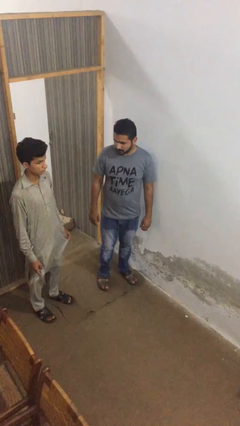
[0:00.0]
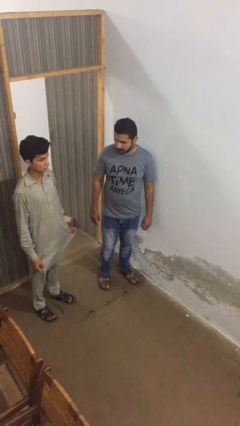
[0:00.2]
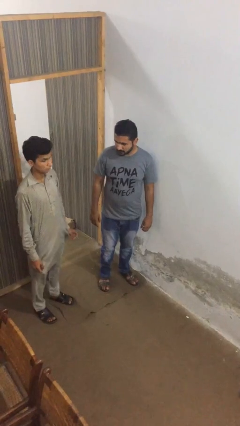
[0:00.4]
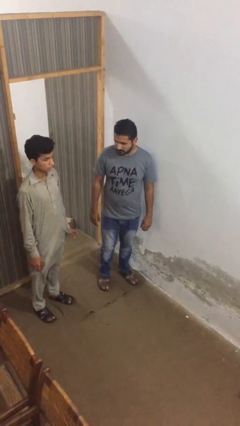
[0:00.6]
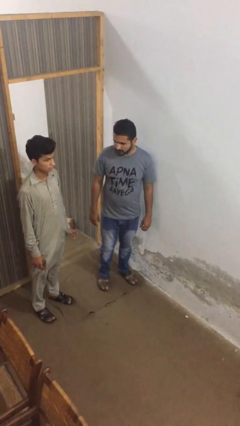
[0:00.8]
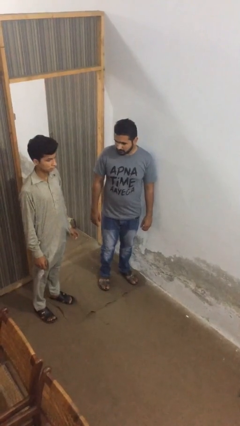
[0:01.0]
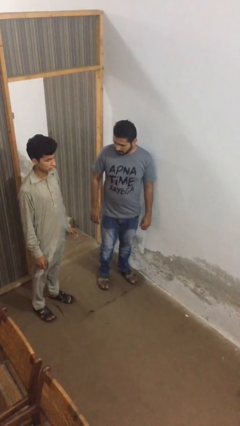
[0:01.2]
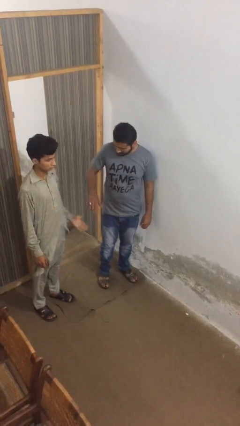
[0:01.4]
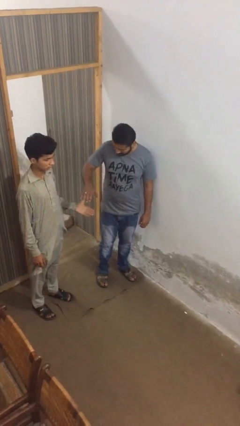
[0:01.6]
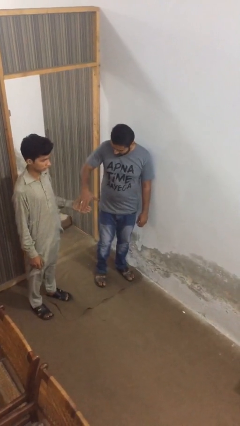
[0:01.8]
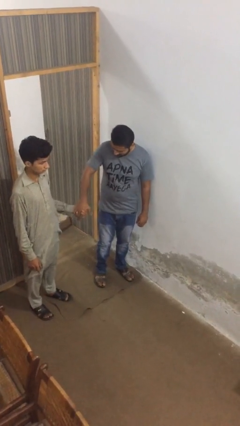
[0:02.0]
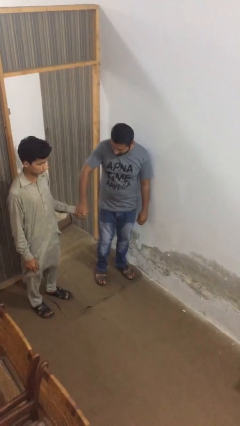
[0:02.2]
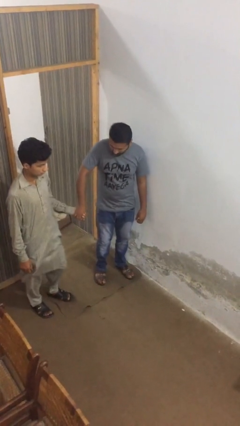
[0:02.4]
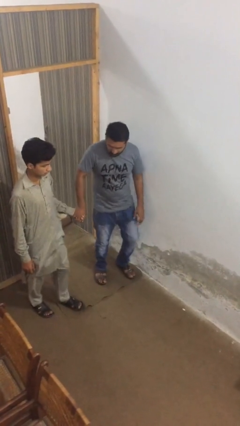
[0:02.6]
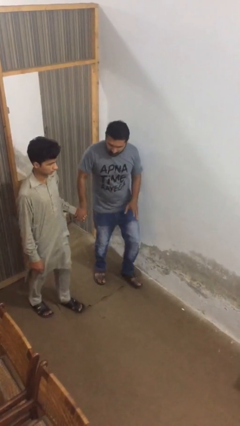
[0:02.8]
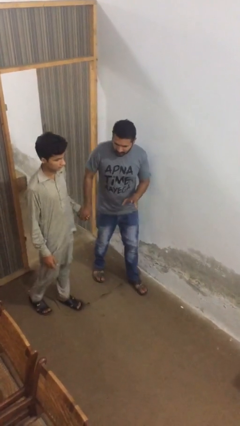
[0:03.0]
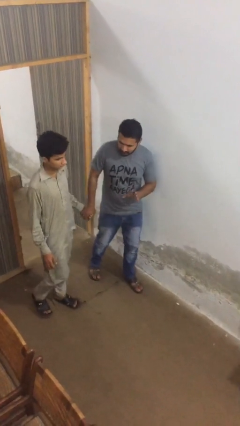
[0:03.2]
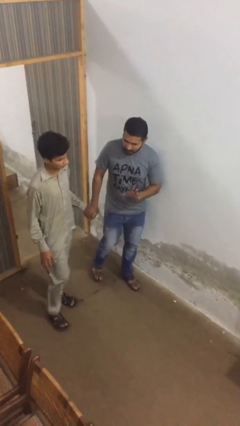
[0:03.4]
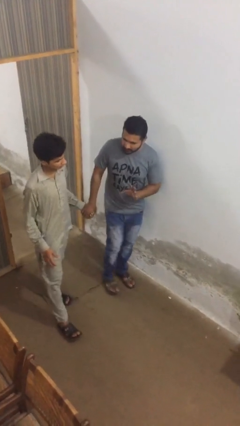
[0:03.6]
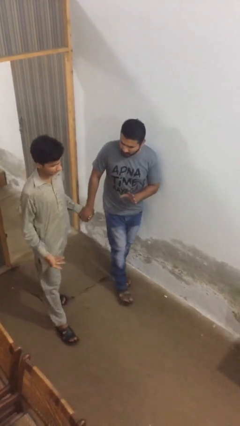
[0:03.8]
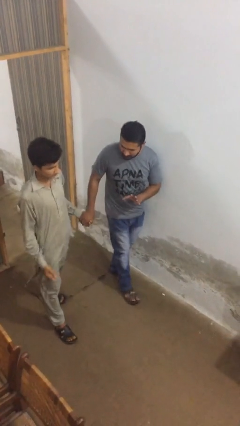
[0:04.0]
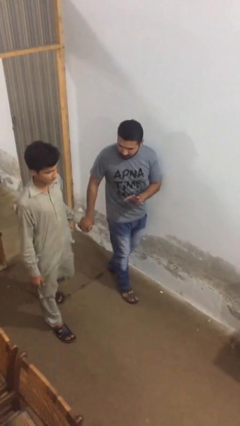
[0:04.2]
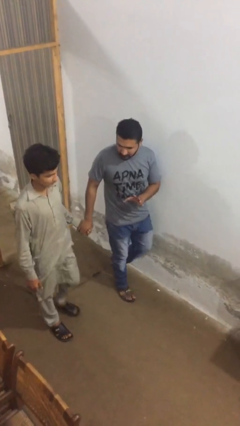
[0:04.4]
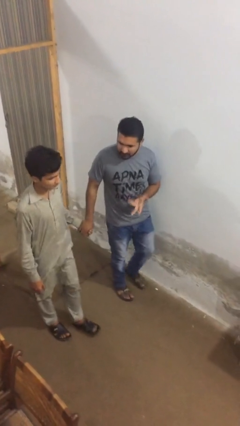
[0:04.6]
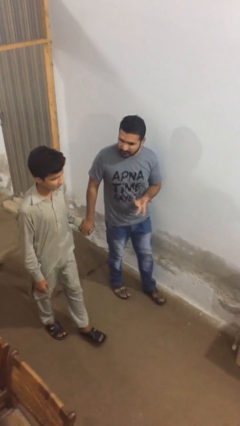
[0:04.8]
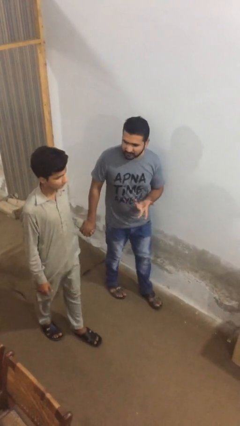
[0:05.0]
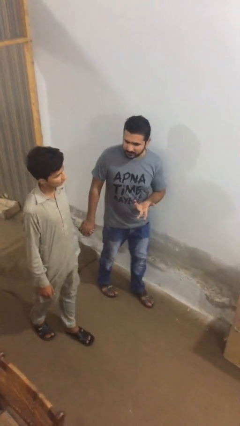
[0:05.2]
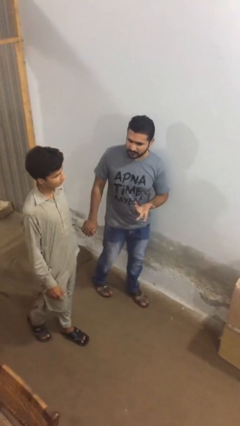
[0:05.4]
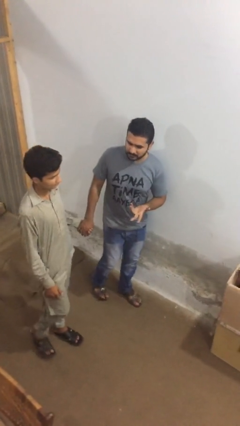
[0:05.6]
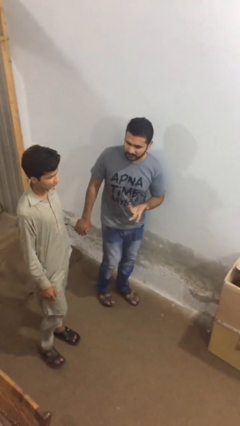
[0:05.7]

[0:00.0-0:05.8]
person holds hand

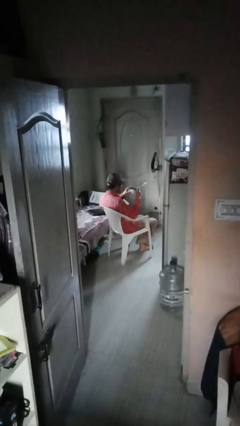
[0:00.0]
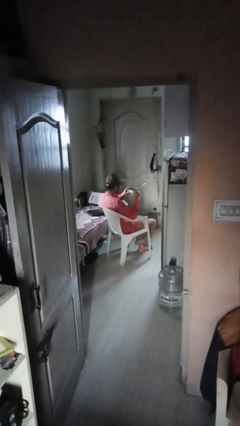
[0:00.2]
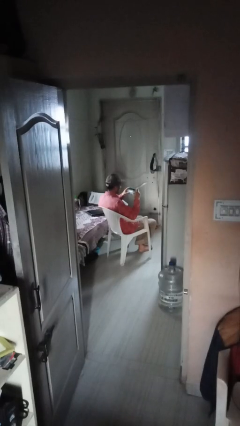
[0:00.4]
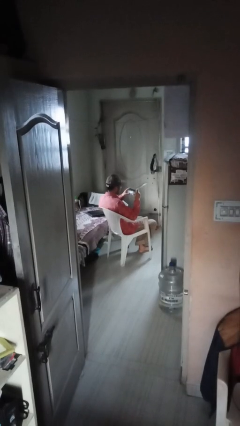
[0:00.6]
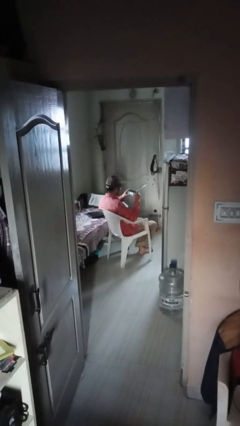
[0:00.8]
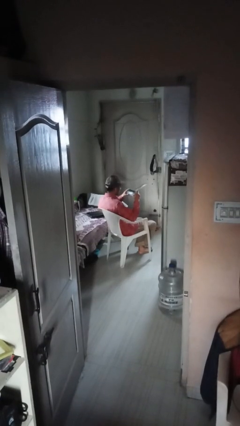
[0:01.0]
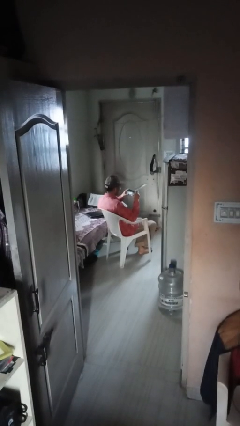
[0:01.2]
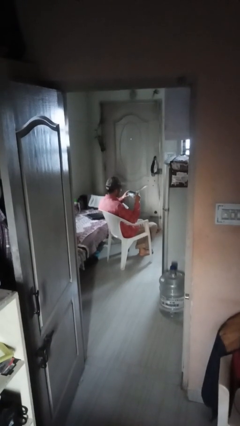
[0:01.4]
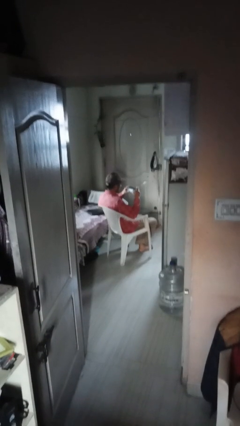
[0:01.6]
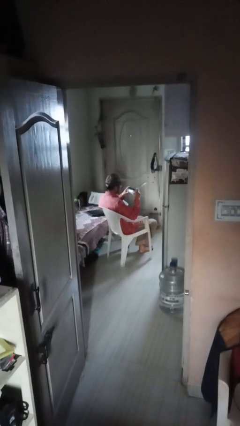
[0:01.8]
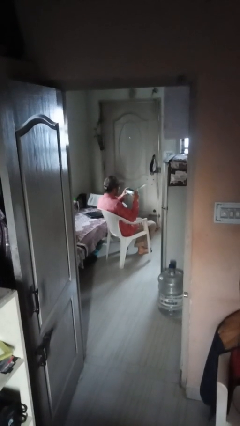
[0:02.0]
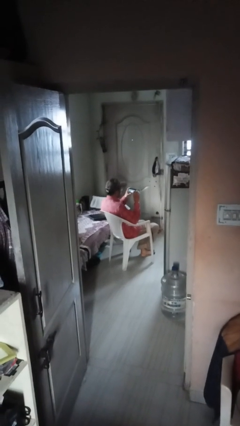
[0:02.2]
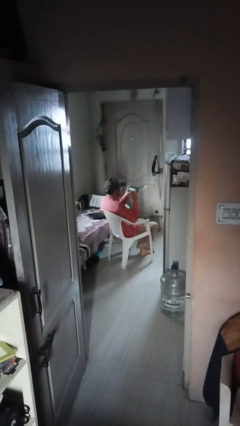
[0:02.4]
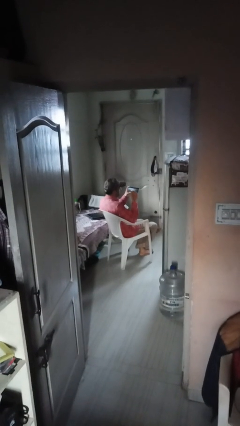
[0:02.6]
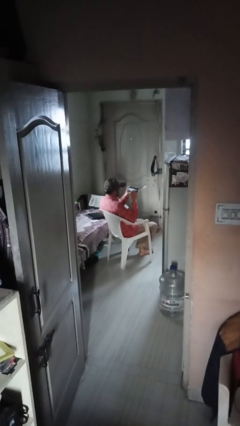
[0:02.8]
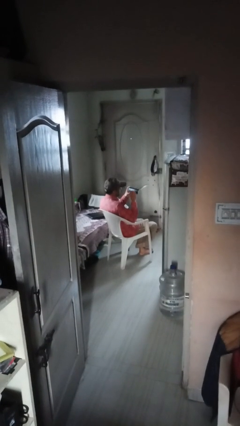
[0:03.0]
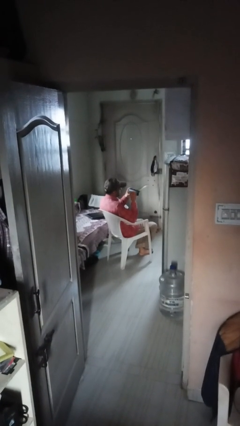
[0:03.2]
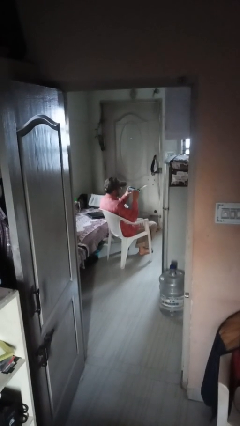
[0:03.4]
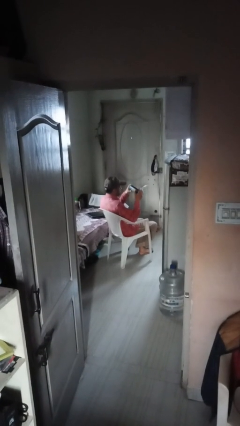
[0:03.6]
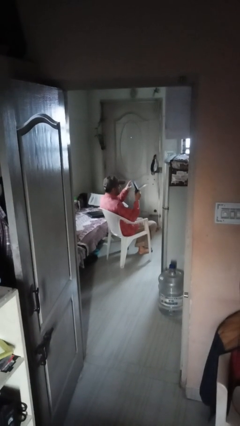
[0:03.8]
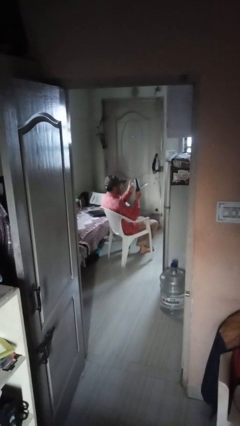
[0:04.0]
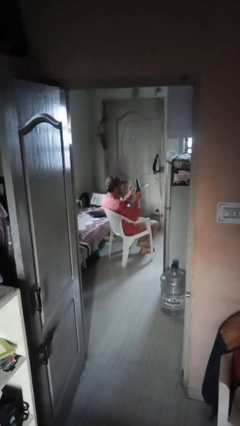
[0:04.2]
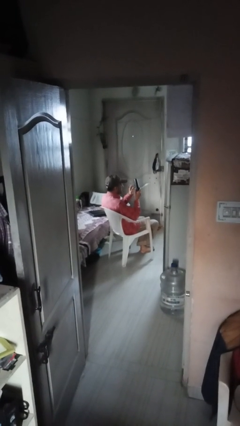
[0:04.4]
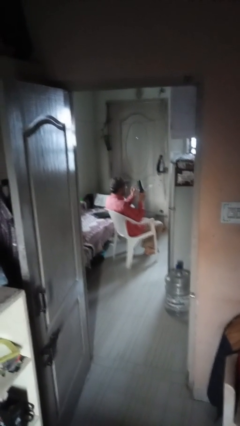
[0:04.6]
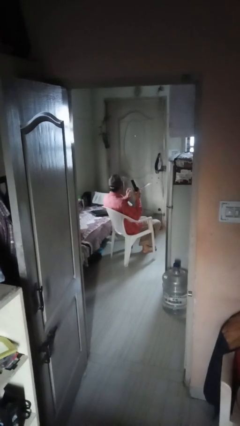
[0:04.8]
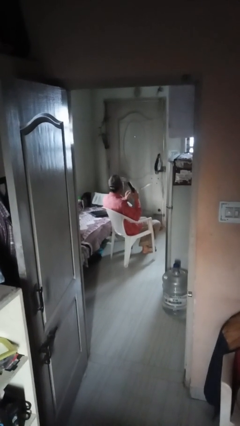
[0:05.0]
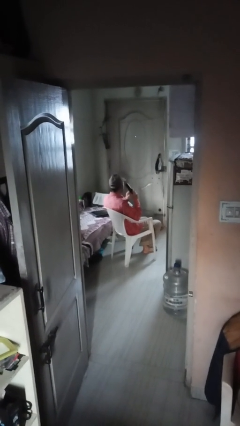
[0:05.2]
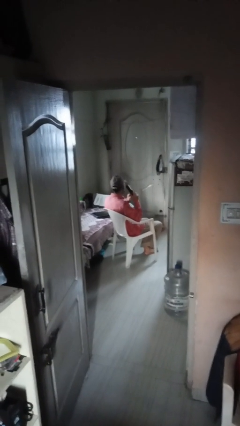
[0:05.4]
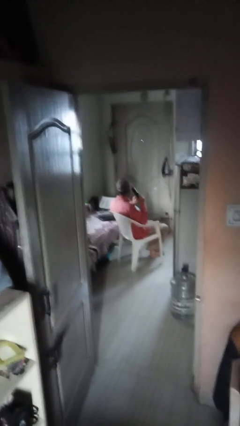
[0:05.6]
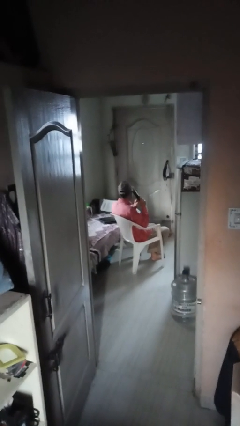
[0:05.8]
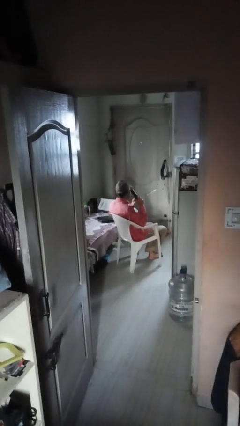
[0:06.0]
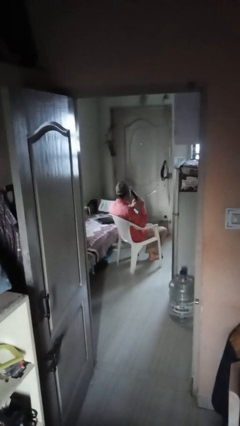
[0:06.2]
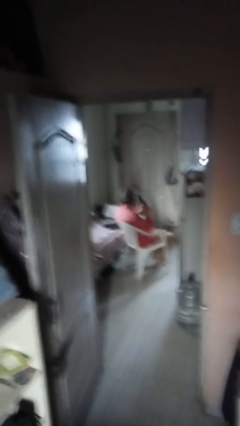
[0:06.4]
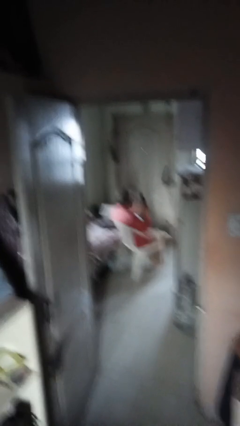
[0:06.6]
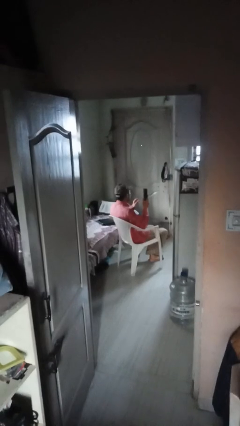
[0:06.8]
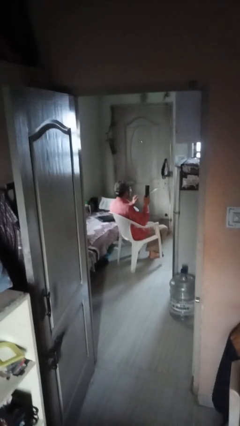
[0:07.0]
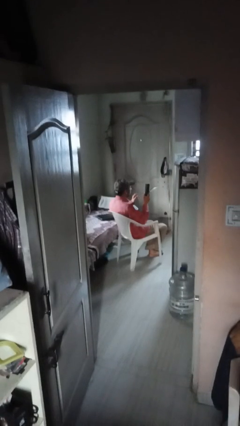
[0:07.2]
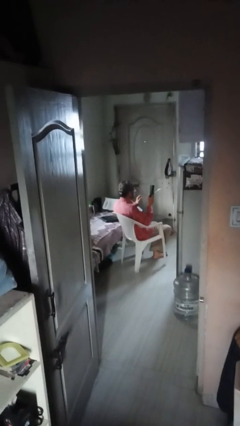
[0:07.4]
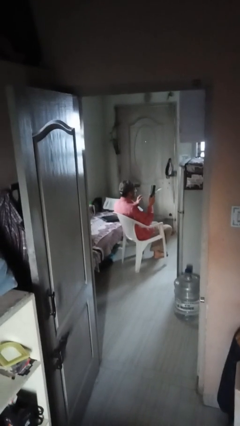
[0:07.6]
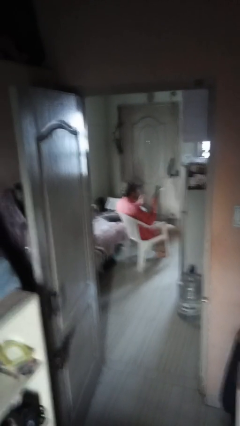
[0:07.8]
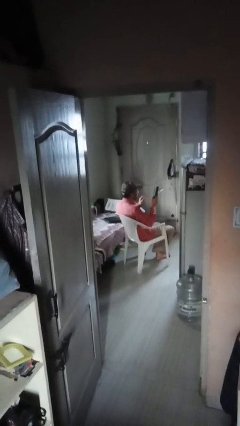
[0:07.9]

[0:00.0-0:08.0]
person taps object with finger

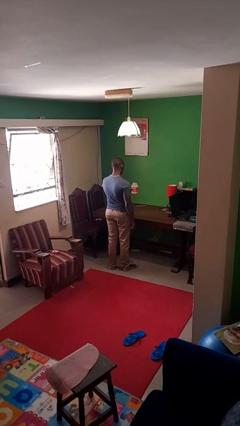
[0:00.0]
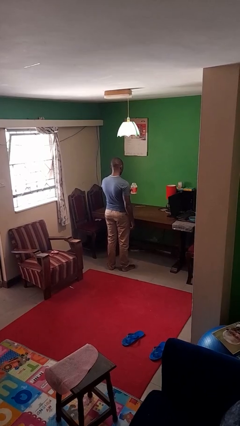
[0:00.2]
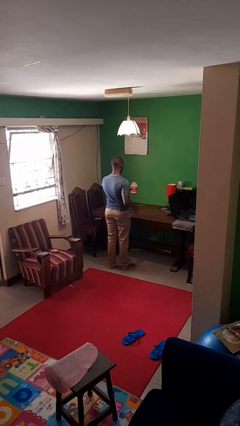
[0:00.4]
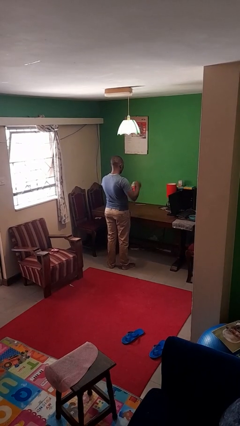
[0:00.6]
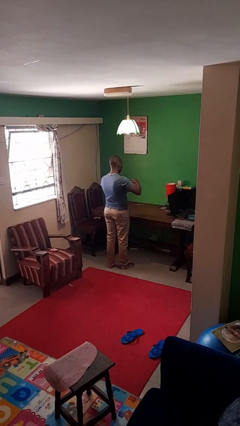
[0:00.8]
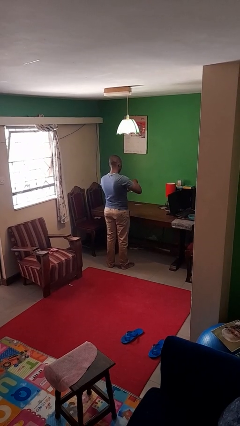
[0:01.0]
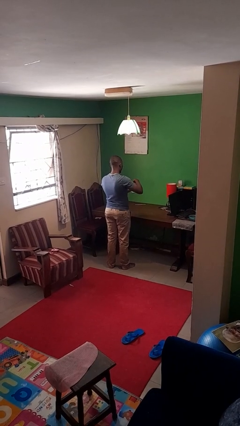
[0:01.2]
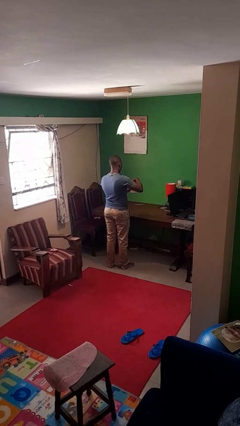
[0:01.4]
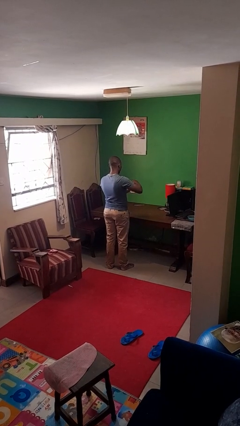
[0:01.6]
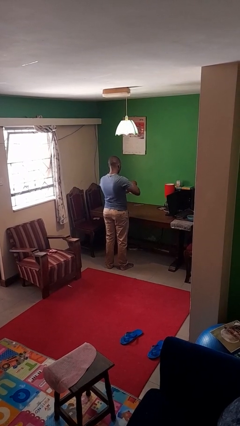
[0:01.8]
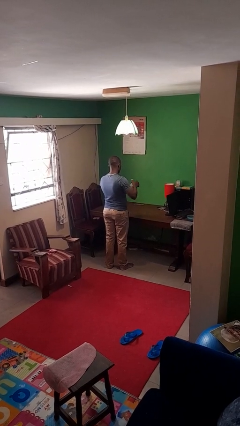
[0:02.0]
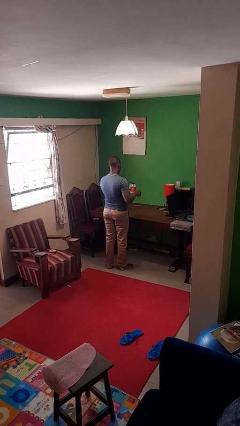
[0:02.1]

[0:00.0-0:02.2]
person closes jar

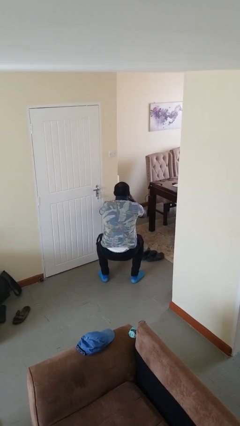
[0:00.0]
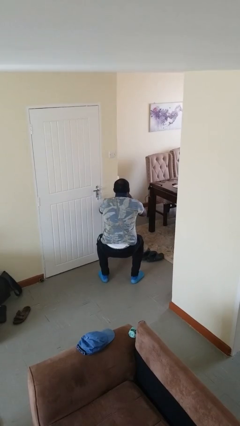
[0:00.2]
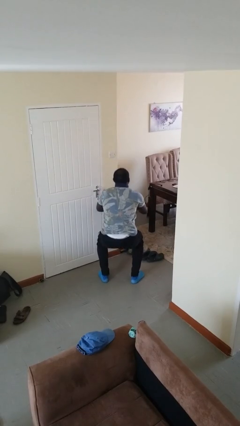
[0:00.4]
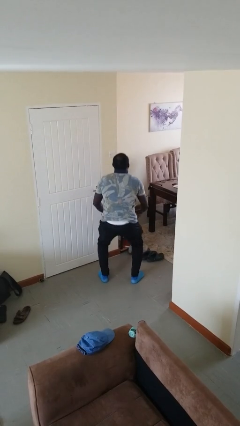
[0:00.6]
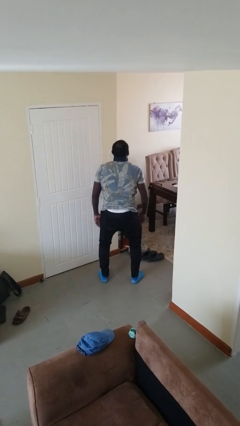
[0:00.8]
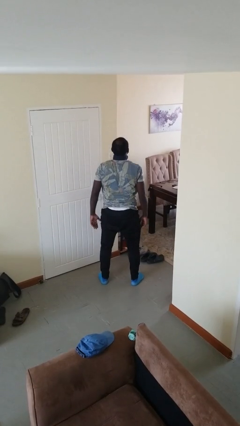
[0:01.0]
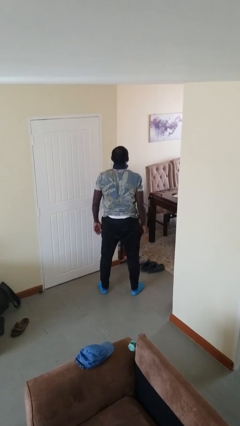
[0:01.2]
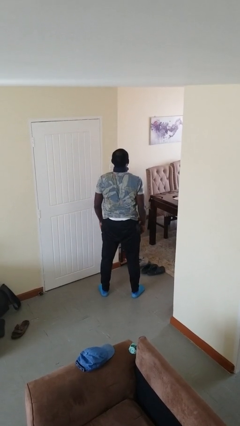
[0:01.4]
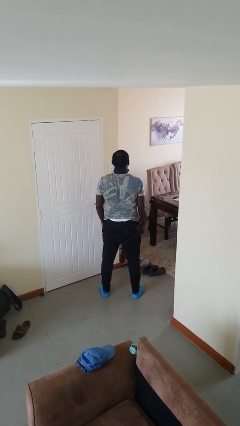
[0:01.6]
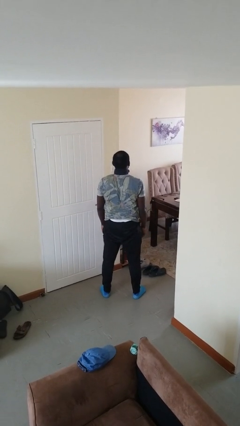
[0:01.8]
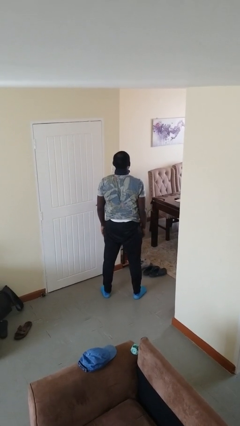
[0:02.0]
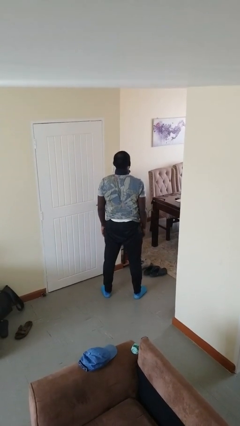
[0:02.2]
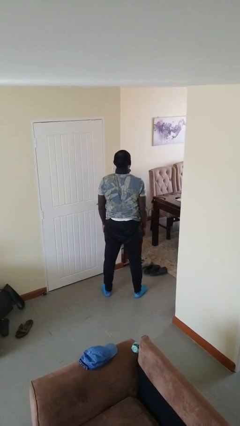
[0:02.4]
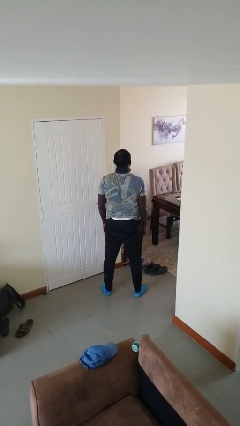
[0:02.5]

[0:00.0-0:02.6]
person stands up
